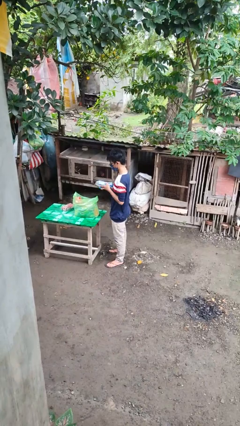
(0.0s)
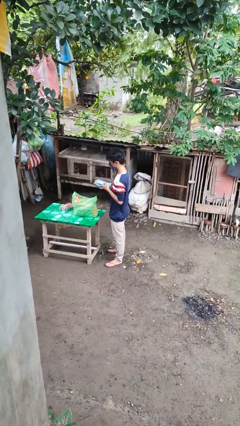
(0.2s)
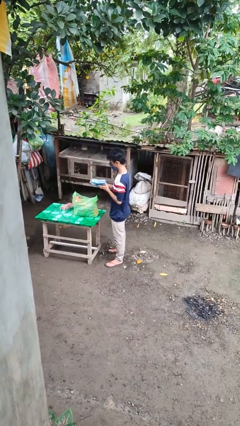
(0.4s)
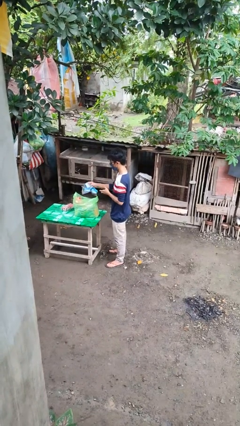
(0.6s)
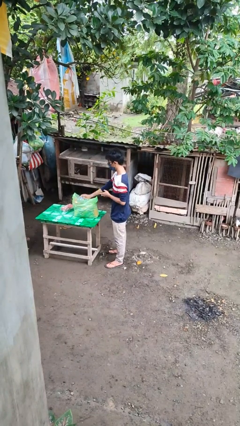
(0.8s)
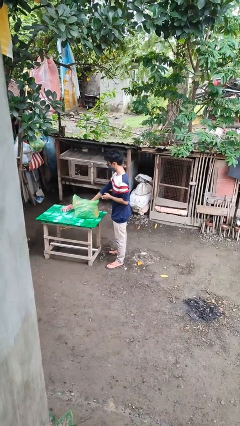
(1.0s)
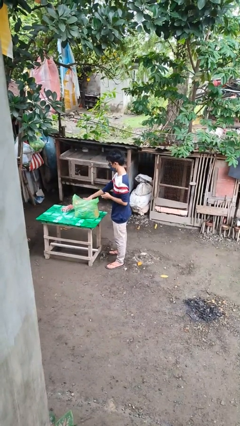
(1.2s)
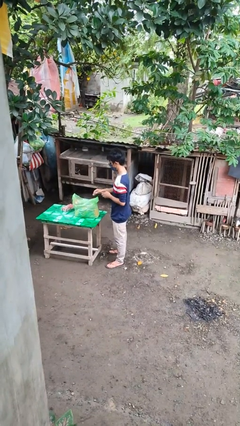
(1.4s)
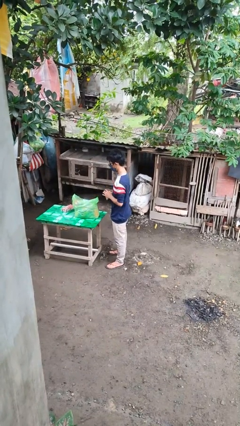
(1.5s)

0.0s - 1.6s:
person puts object into bag

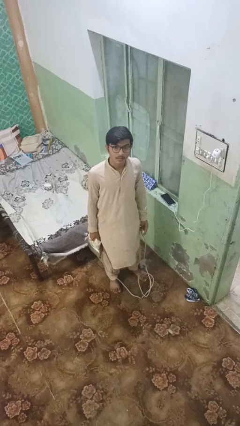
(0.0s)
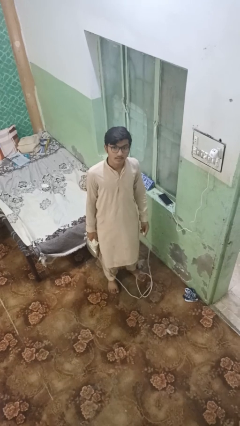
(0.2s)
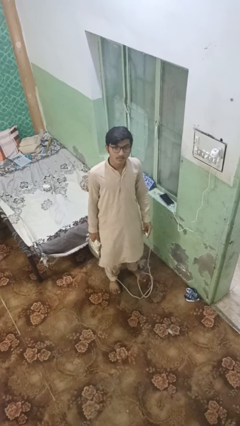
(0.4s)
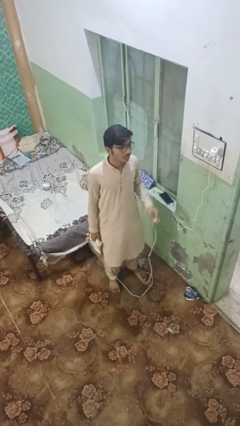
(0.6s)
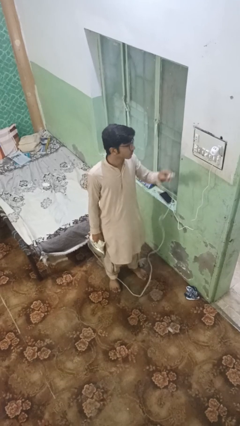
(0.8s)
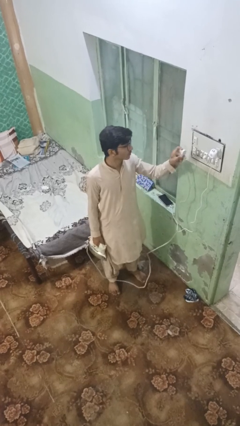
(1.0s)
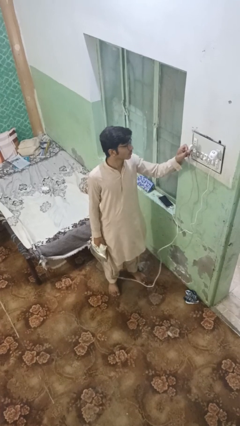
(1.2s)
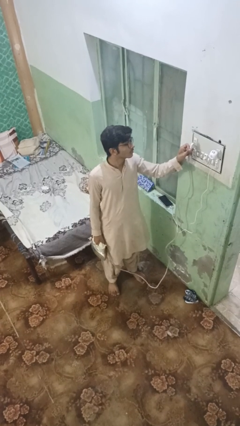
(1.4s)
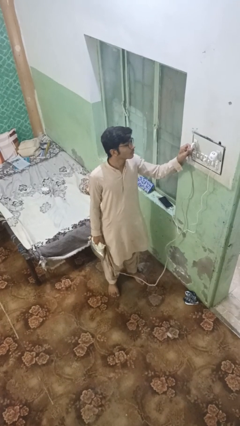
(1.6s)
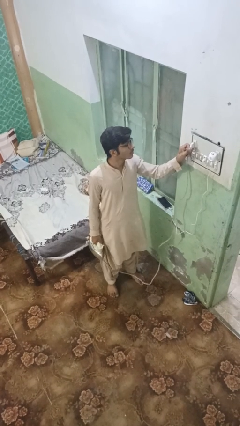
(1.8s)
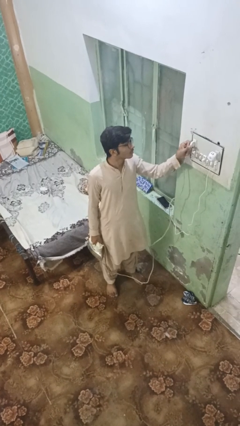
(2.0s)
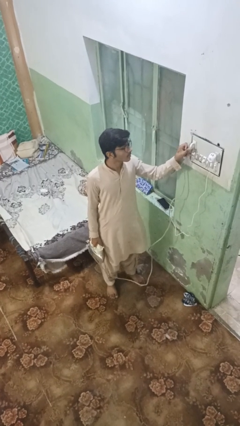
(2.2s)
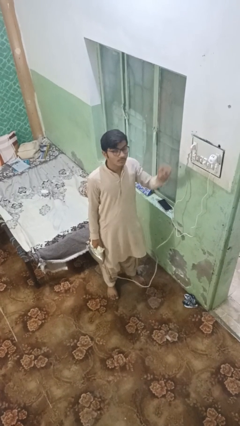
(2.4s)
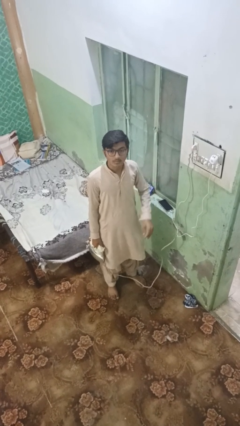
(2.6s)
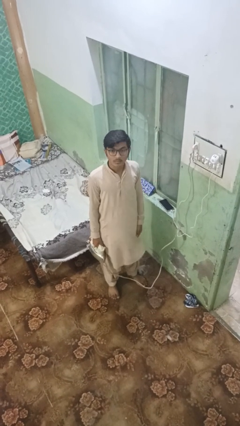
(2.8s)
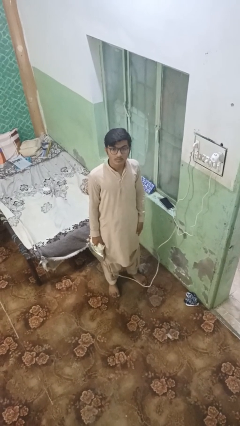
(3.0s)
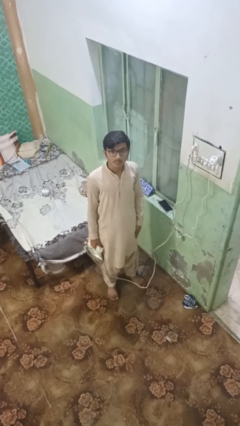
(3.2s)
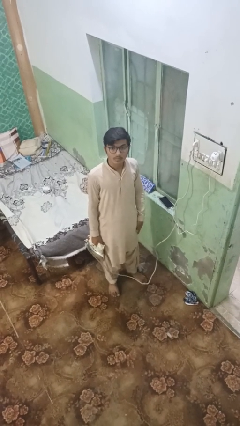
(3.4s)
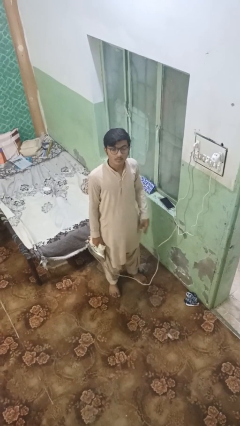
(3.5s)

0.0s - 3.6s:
person plugs into electrical socket

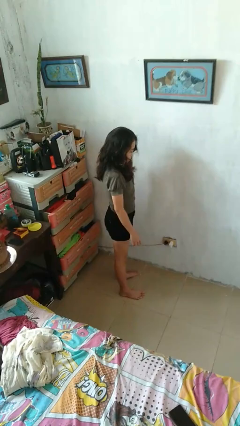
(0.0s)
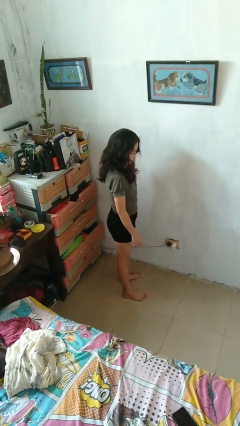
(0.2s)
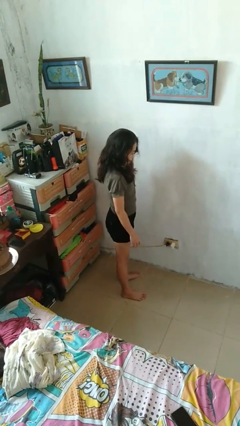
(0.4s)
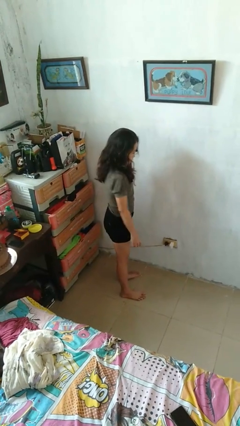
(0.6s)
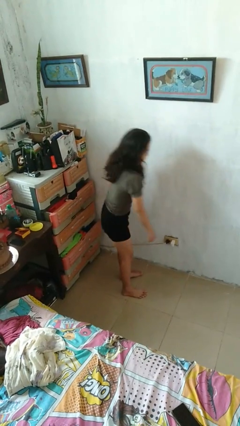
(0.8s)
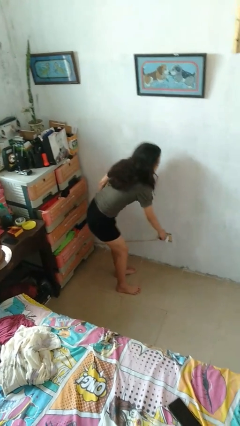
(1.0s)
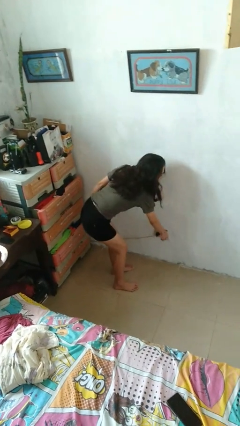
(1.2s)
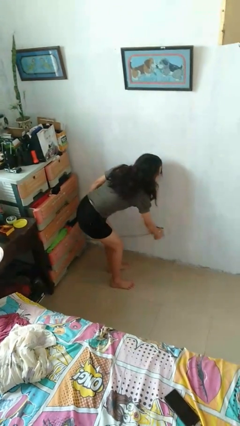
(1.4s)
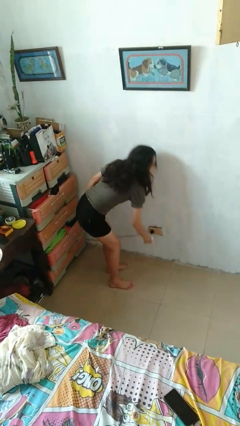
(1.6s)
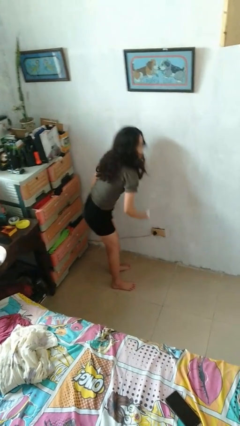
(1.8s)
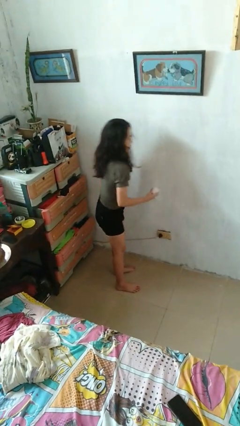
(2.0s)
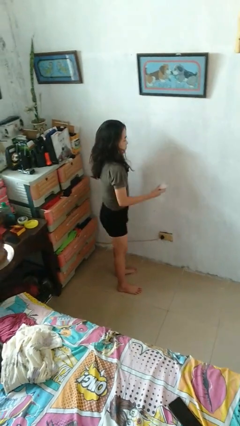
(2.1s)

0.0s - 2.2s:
person unplugs from electrical socket

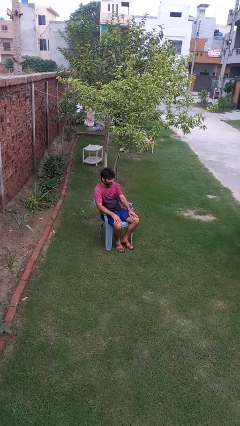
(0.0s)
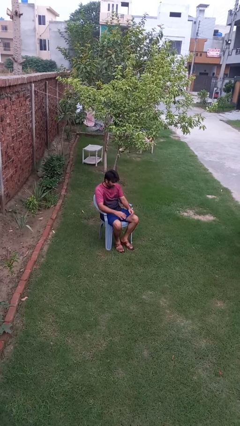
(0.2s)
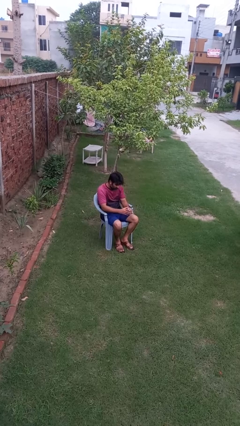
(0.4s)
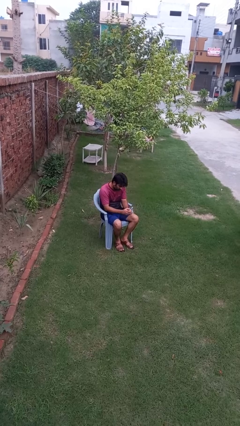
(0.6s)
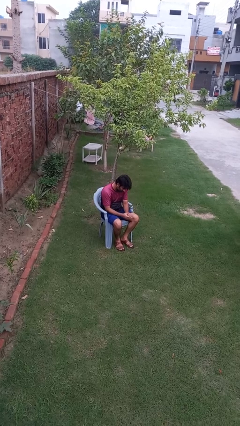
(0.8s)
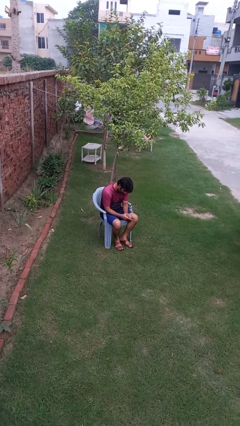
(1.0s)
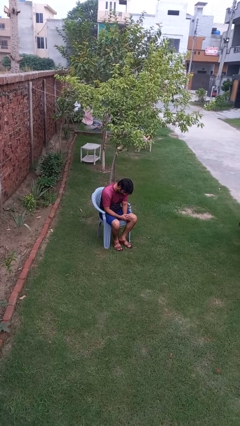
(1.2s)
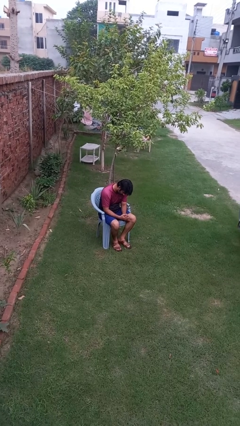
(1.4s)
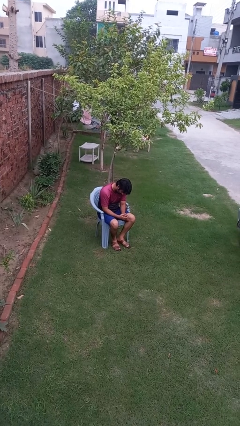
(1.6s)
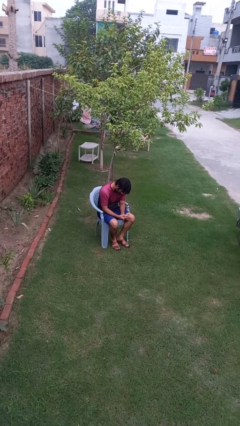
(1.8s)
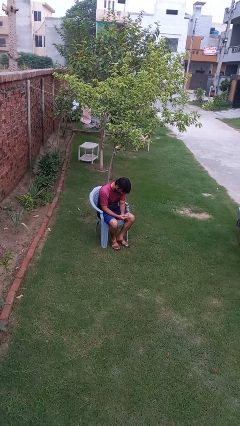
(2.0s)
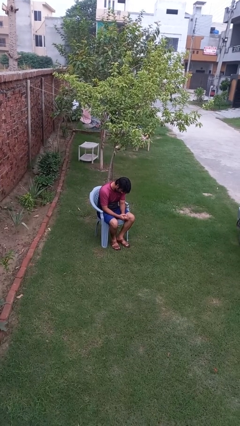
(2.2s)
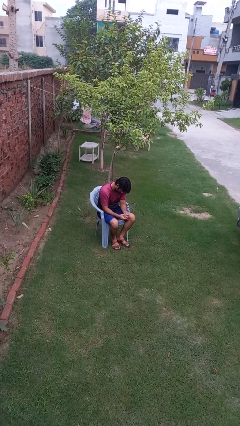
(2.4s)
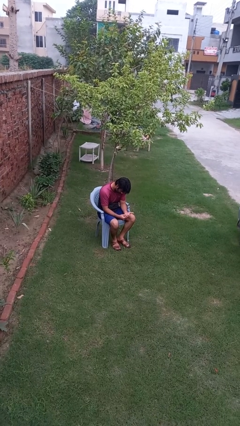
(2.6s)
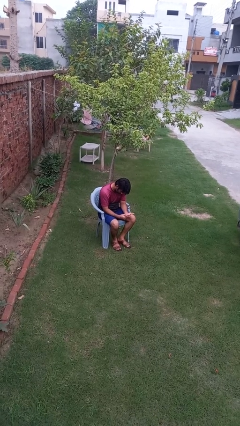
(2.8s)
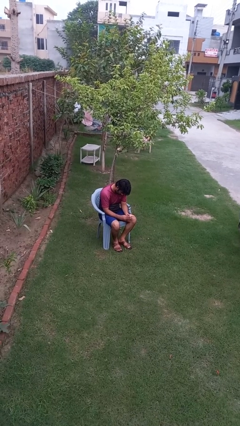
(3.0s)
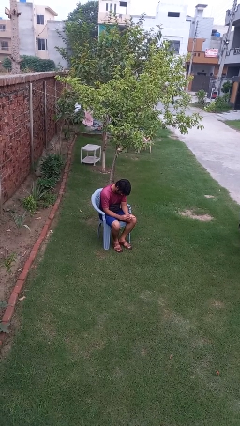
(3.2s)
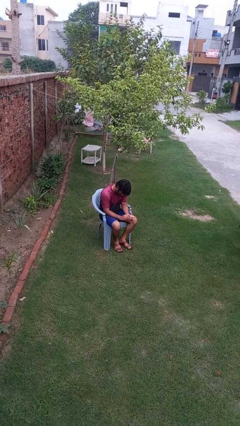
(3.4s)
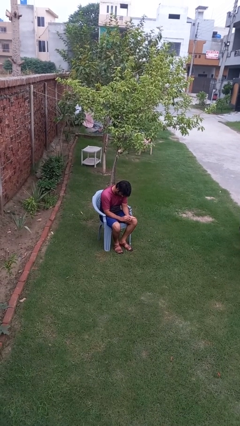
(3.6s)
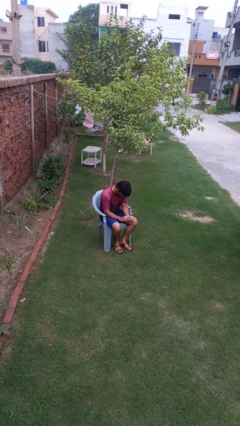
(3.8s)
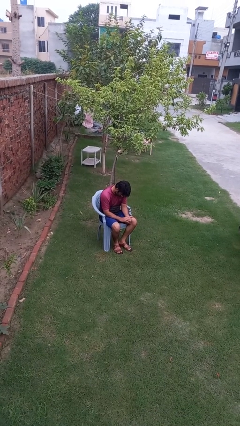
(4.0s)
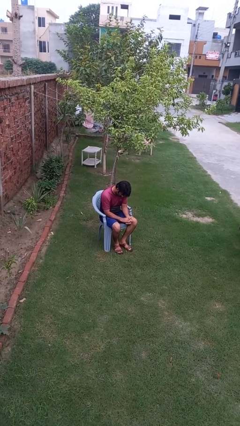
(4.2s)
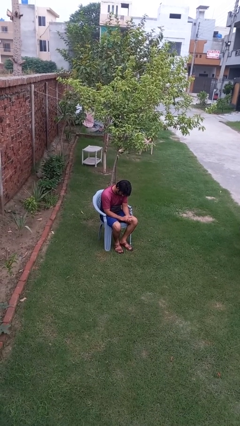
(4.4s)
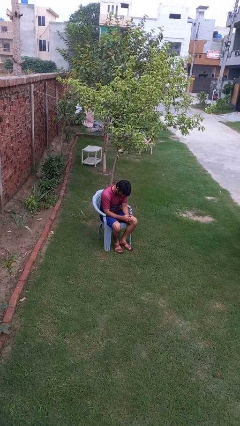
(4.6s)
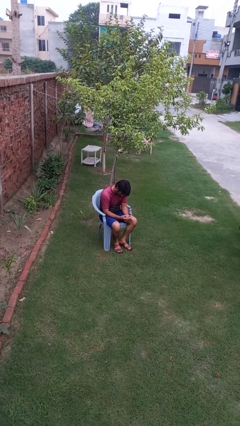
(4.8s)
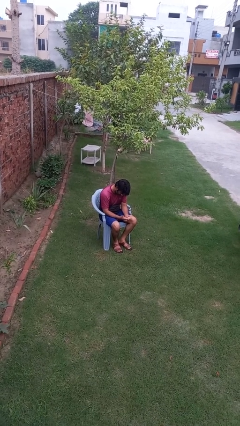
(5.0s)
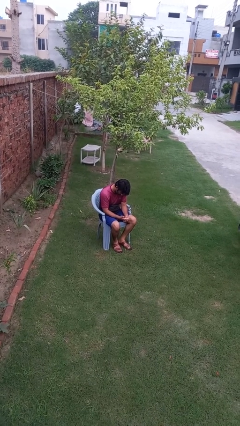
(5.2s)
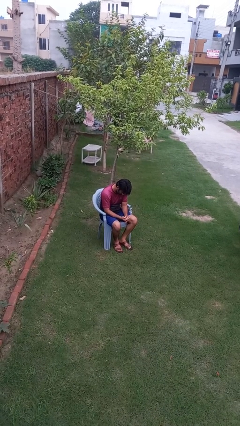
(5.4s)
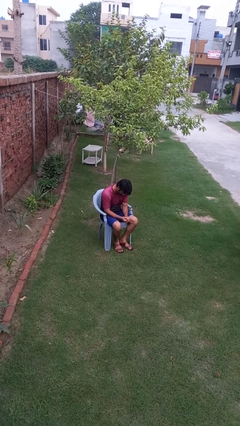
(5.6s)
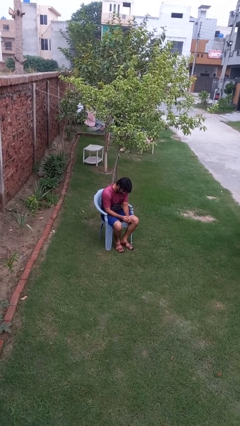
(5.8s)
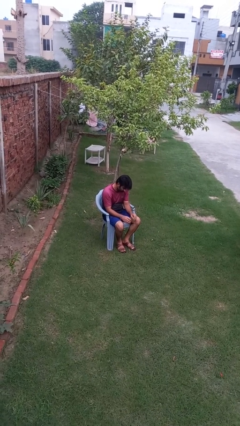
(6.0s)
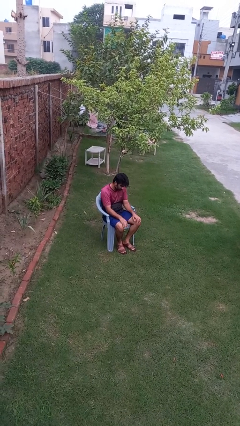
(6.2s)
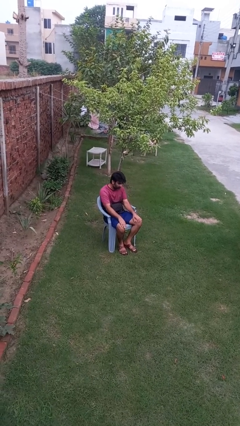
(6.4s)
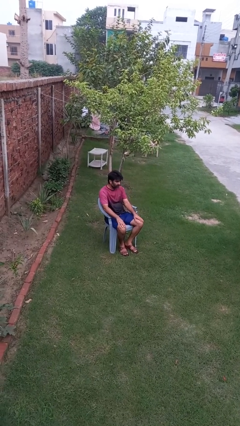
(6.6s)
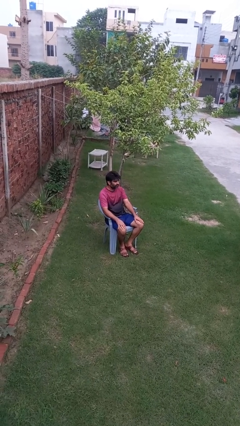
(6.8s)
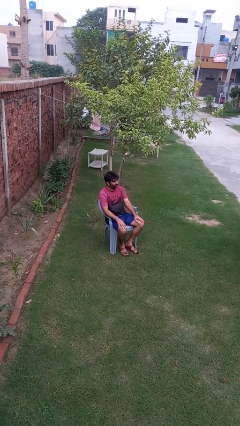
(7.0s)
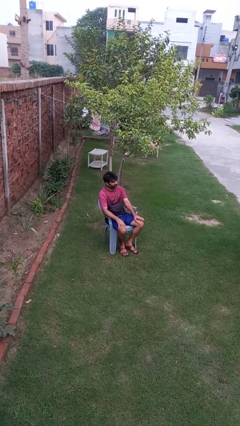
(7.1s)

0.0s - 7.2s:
person looks at hands in lap

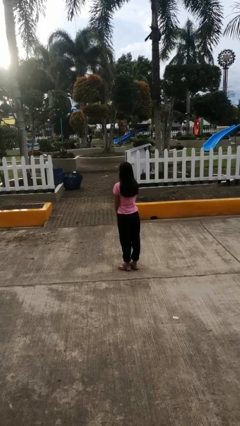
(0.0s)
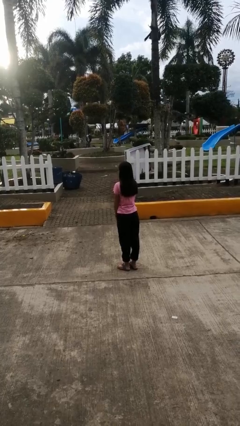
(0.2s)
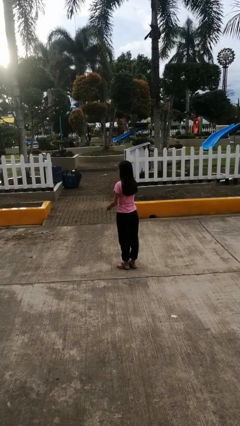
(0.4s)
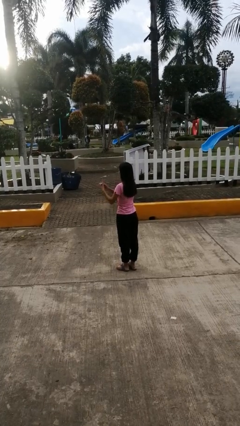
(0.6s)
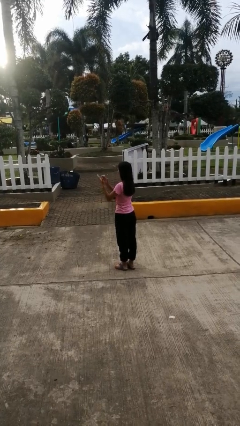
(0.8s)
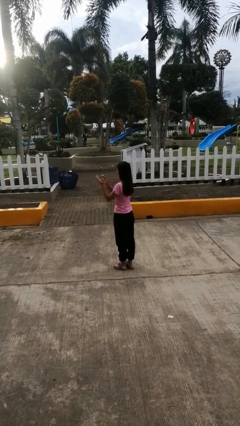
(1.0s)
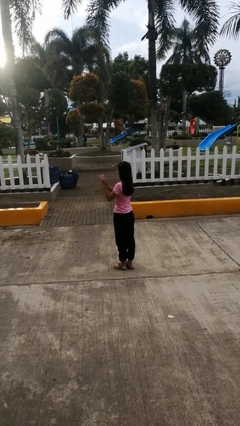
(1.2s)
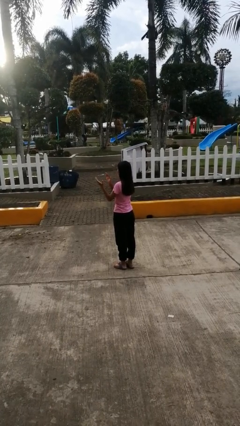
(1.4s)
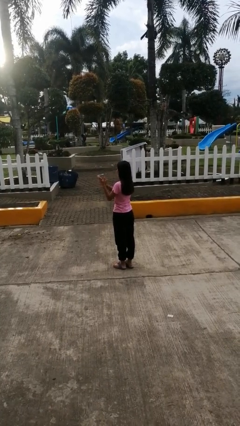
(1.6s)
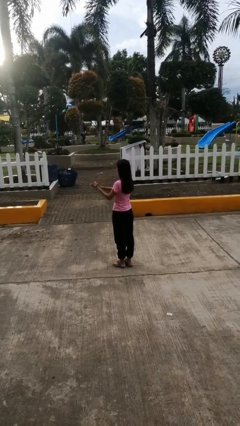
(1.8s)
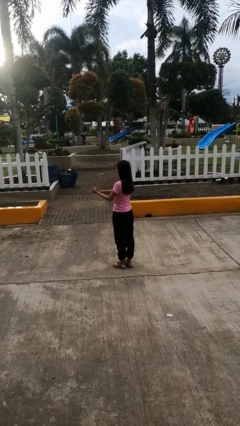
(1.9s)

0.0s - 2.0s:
person claps hands

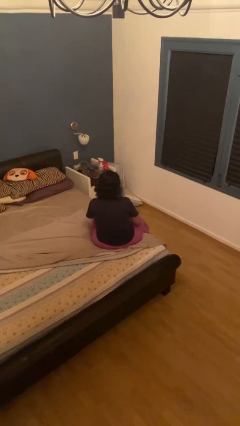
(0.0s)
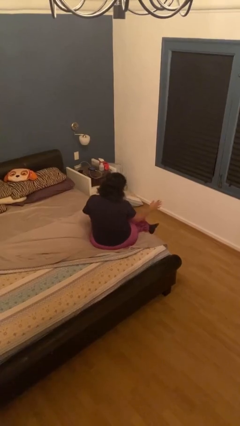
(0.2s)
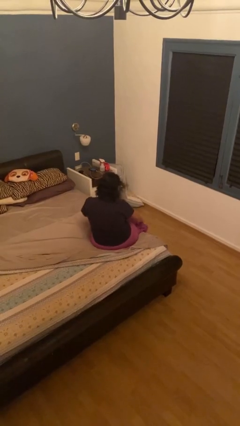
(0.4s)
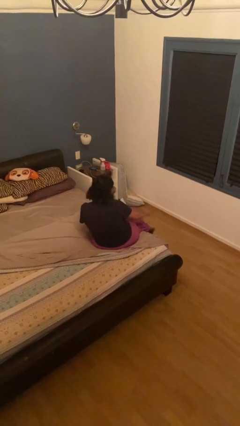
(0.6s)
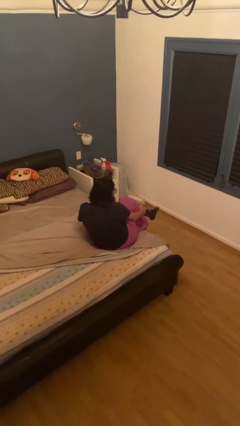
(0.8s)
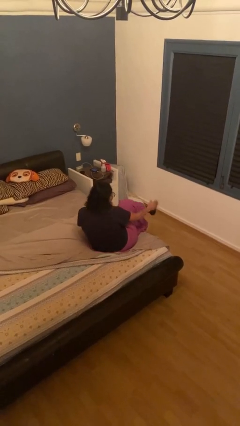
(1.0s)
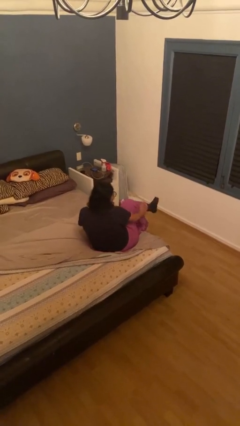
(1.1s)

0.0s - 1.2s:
person swats bug
